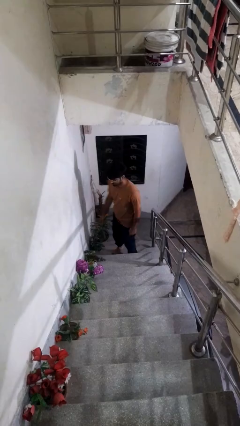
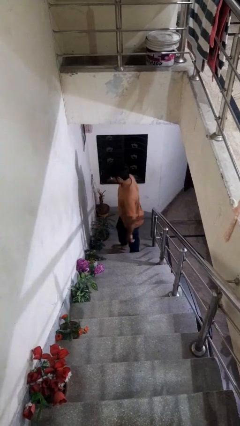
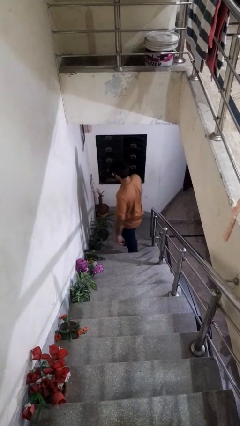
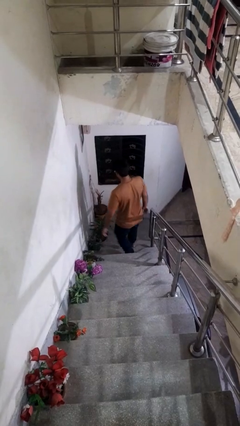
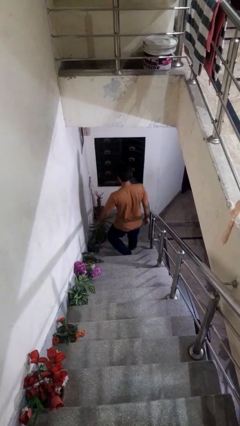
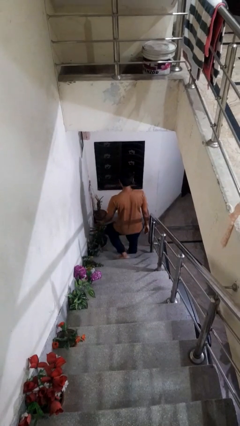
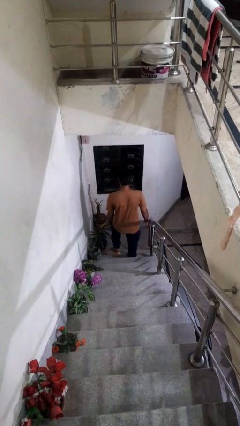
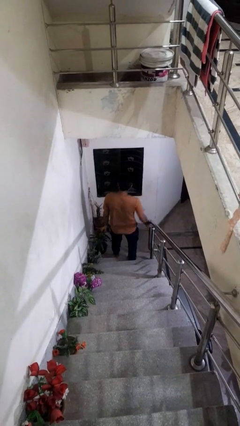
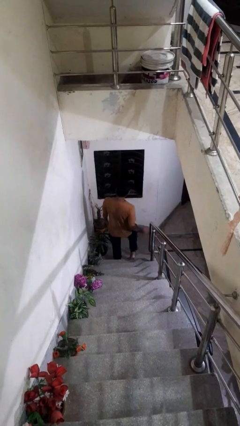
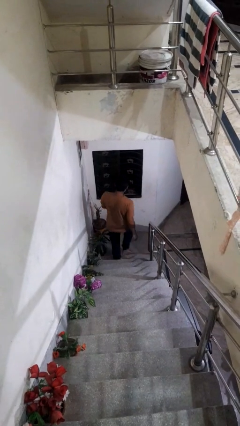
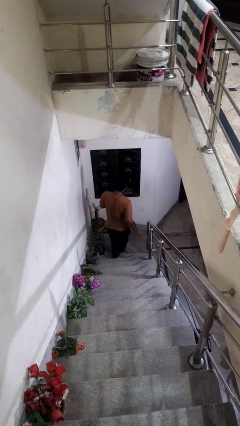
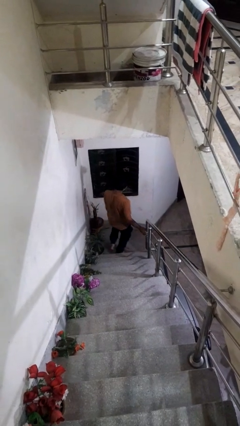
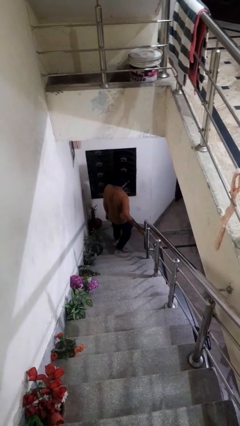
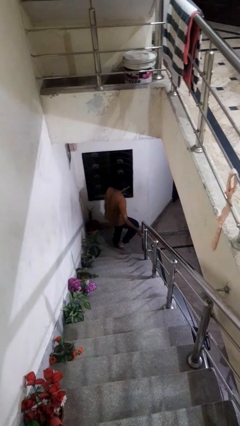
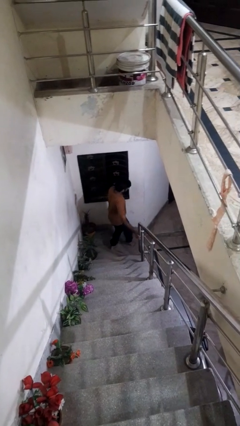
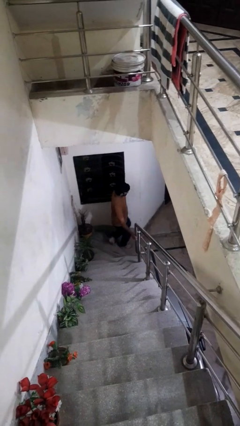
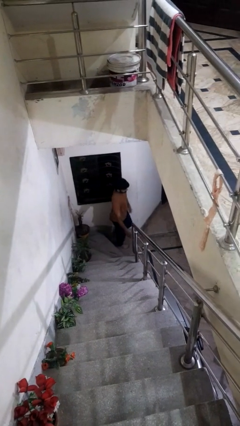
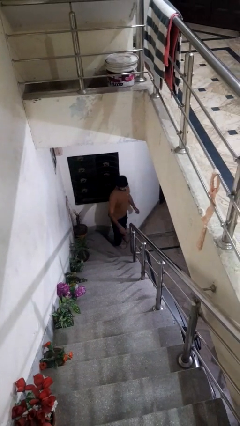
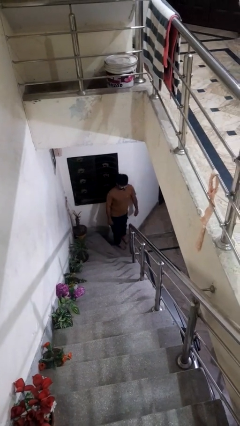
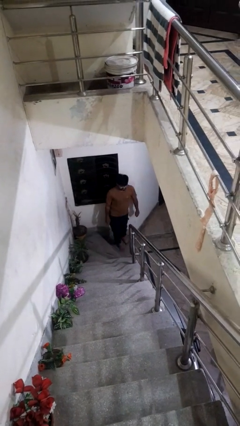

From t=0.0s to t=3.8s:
person climbs down stairs

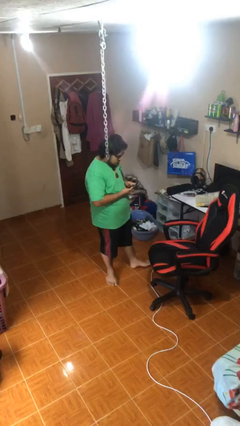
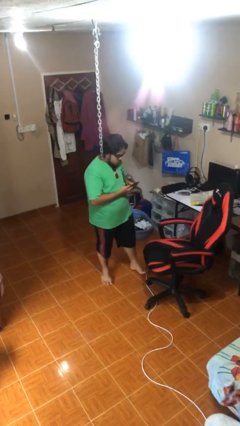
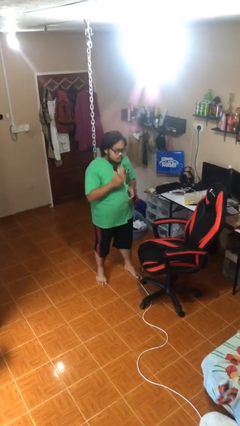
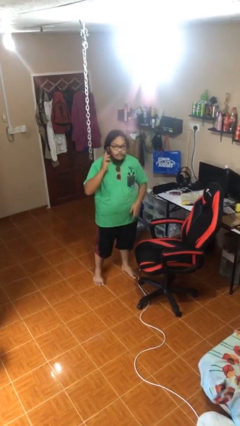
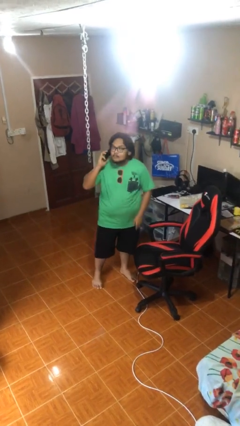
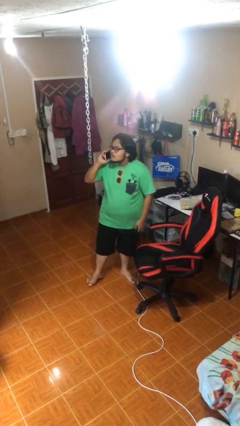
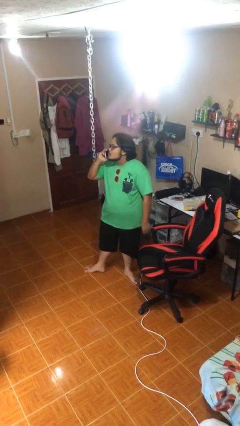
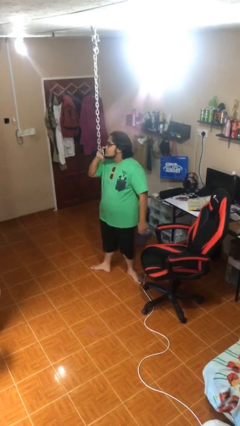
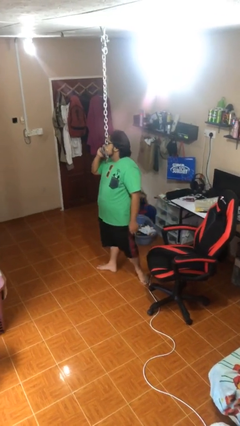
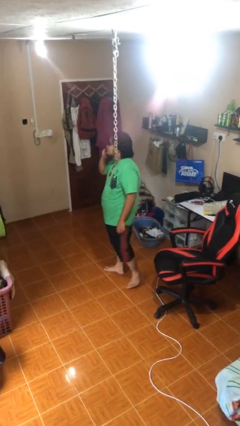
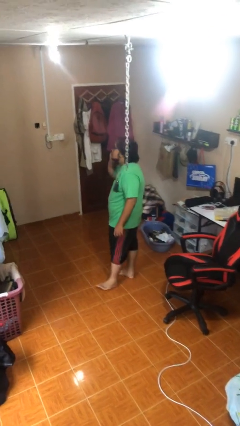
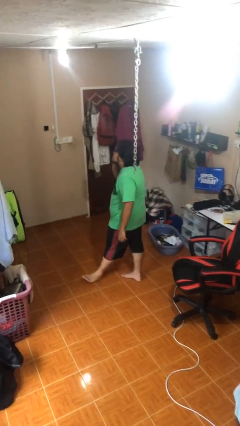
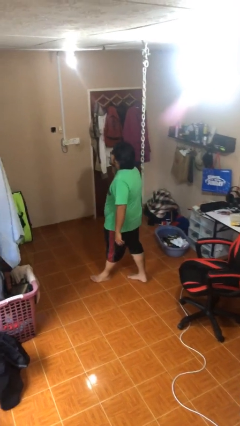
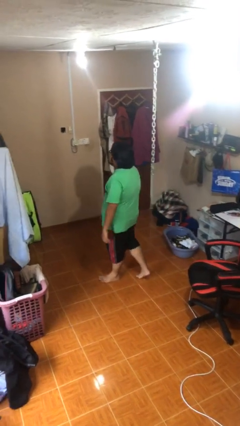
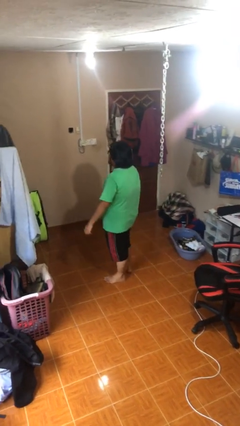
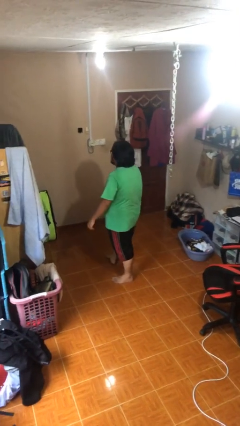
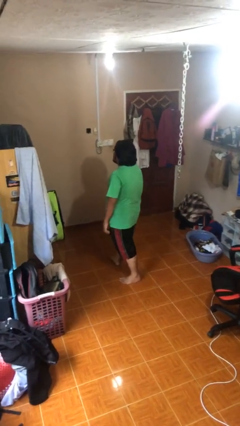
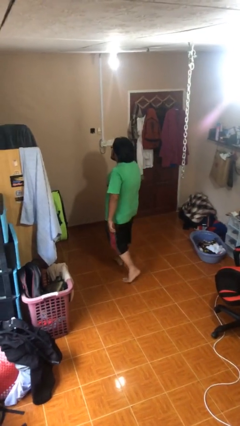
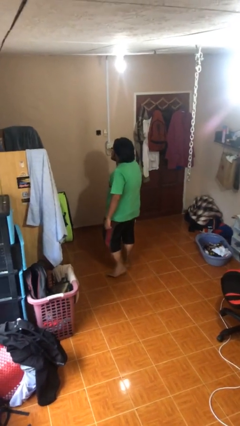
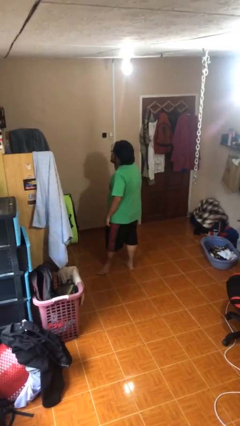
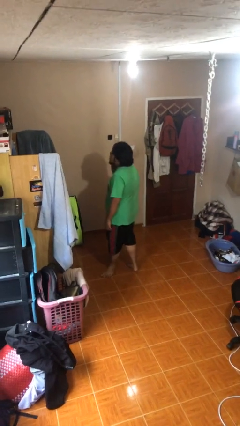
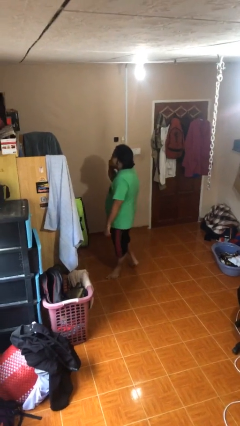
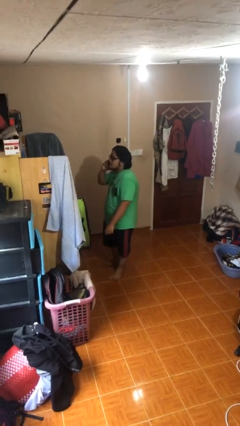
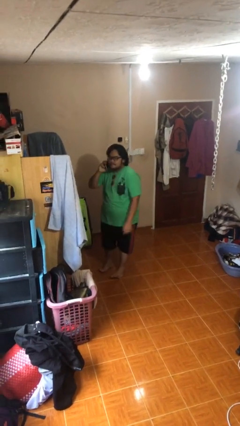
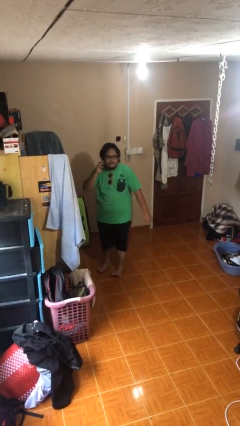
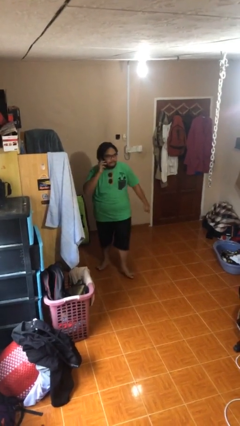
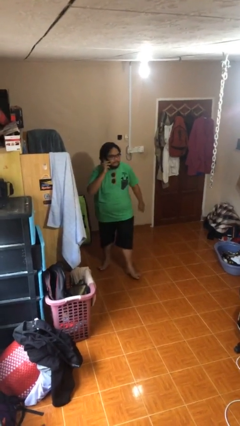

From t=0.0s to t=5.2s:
person talks on phone

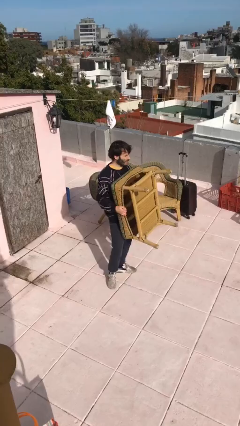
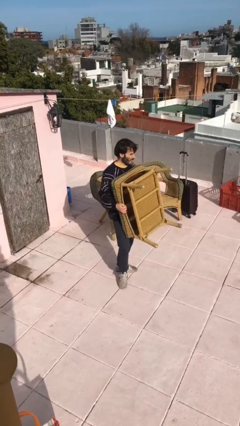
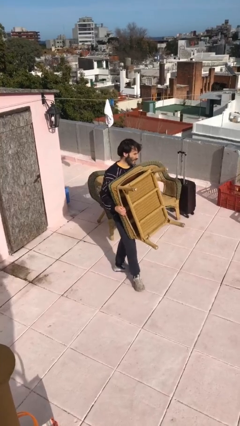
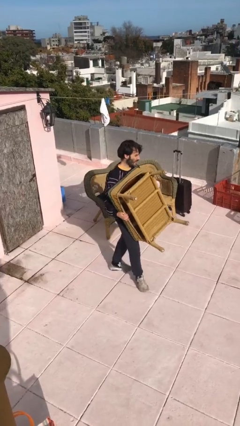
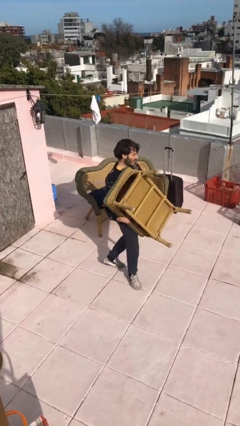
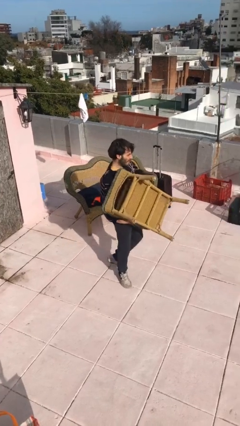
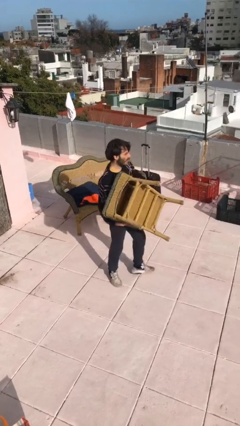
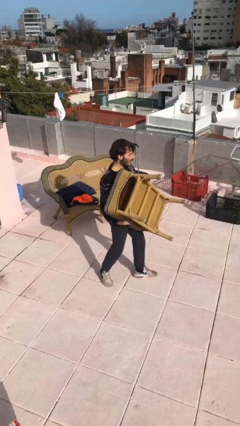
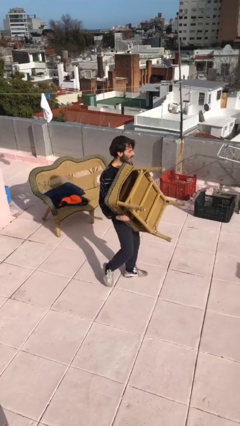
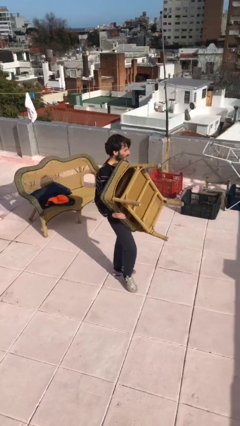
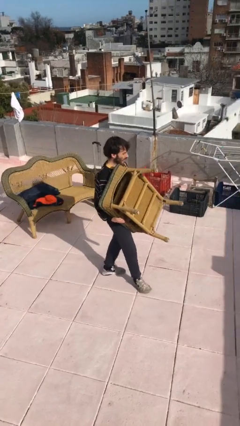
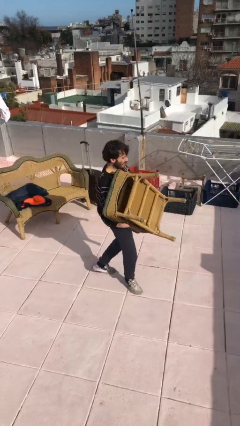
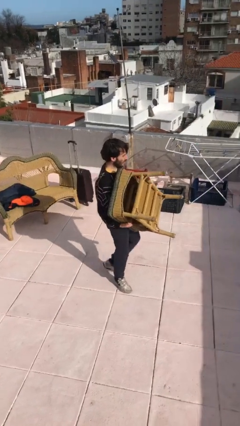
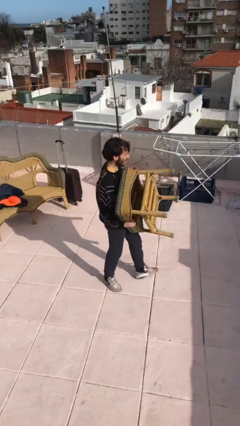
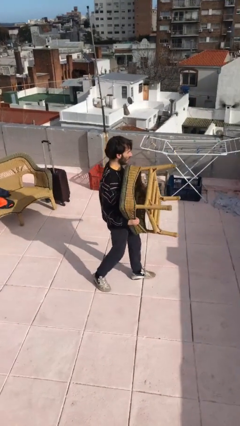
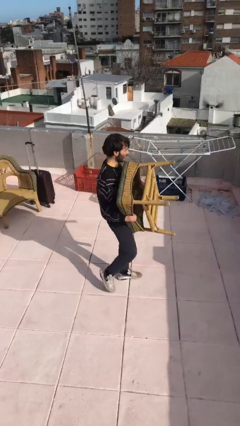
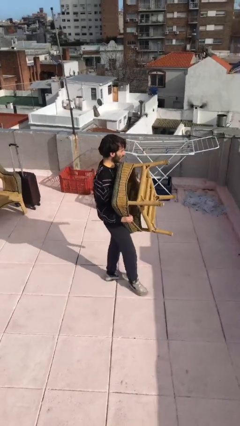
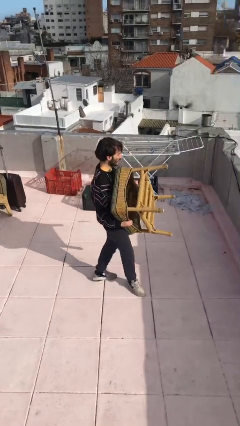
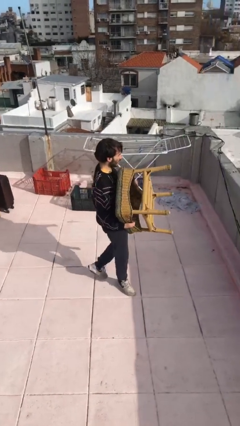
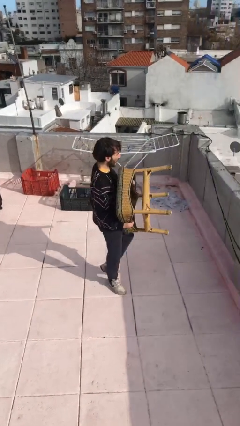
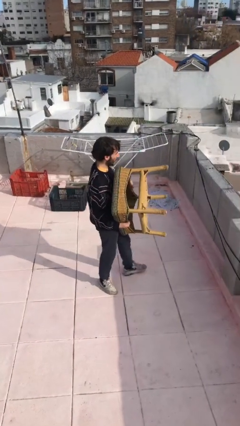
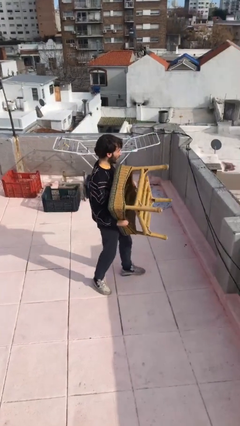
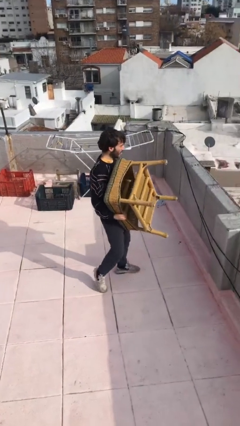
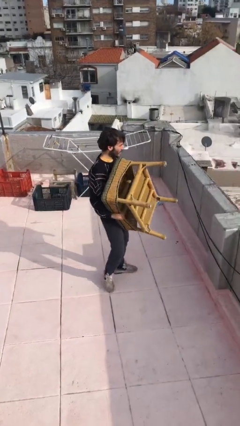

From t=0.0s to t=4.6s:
person carries furniture

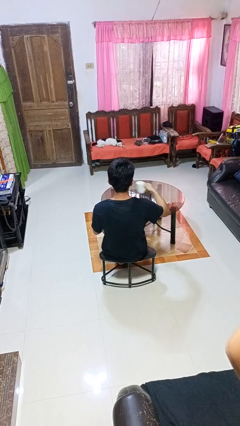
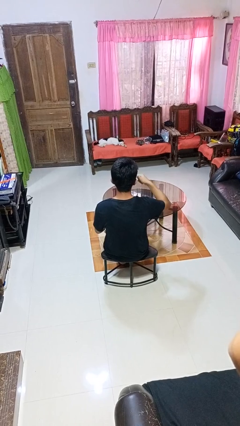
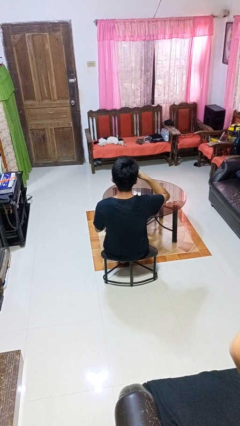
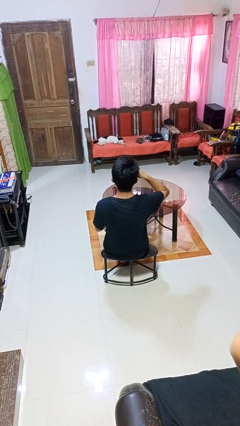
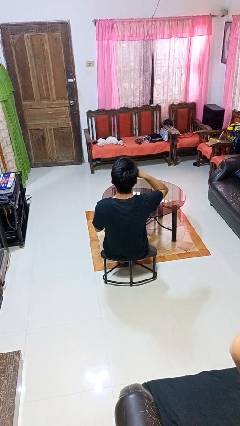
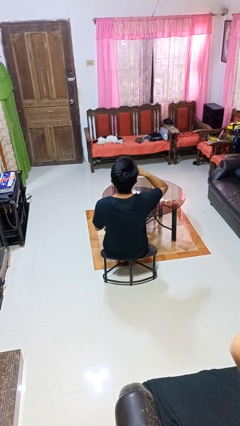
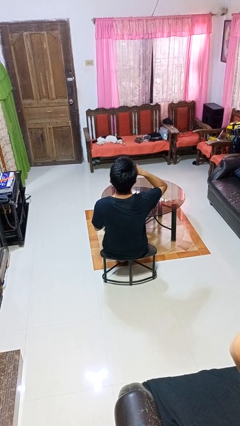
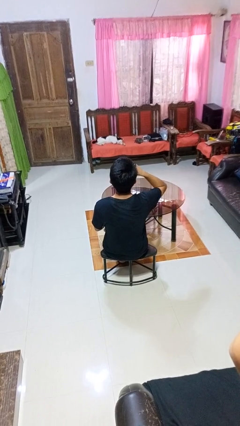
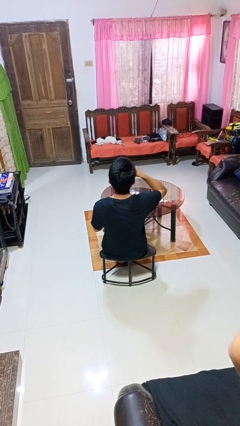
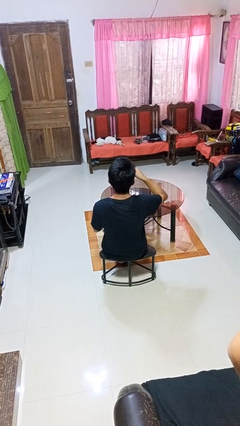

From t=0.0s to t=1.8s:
person drinks from mug

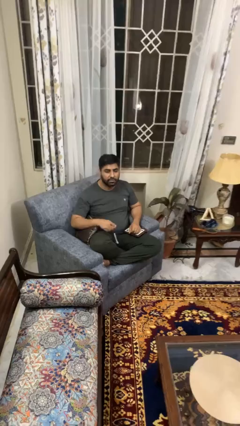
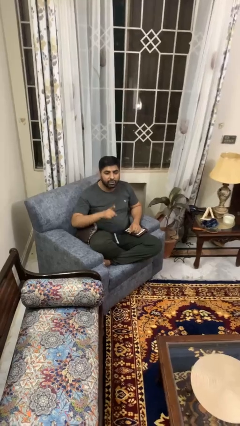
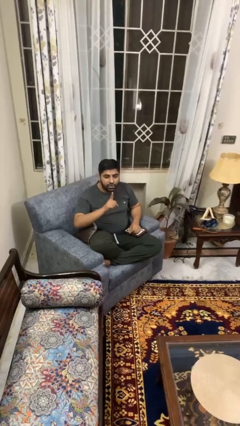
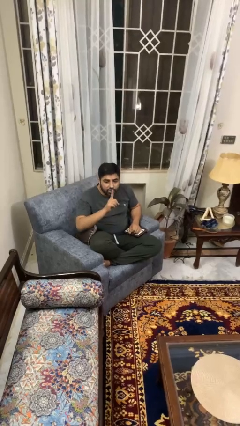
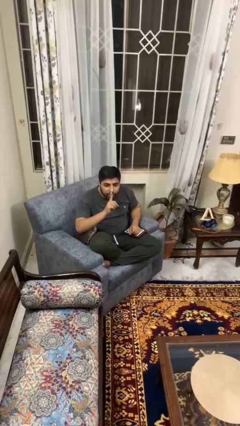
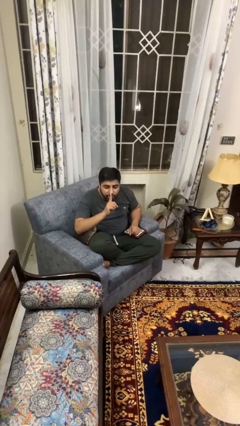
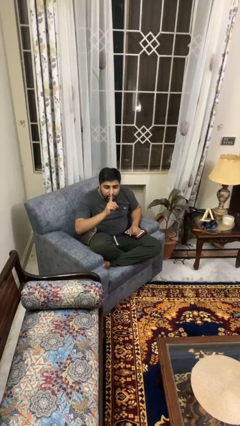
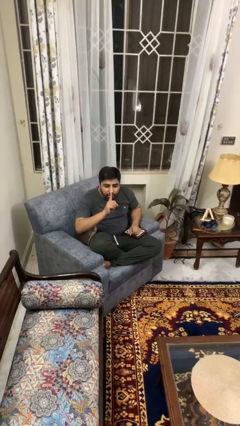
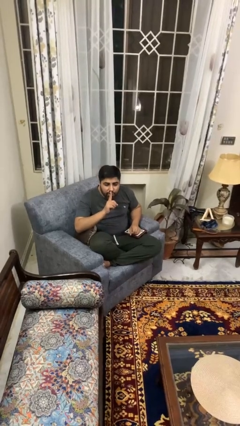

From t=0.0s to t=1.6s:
person gestures be quiet

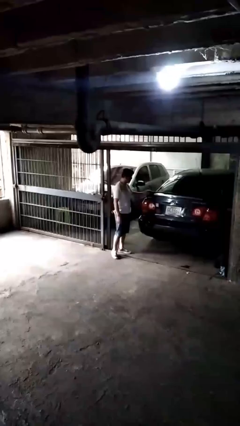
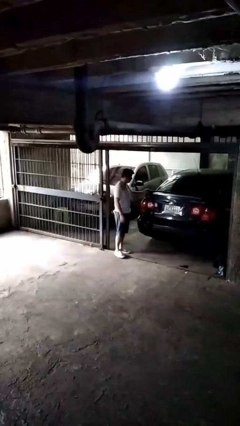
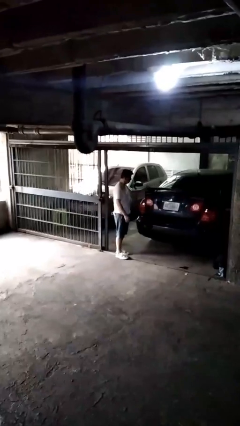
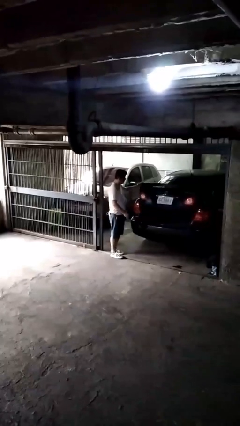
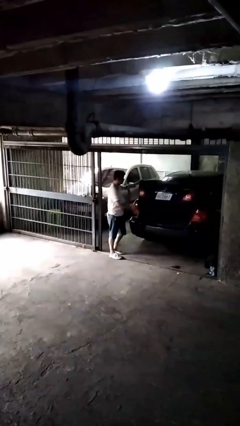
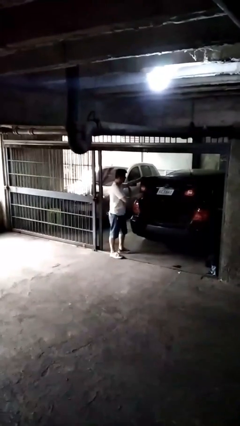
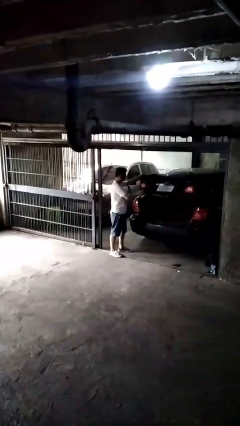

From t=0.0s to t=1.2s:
person opens car trunk
